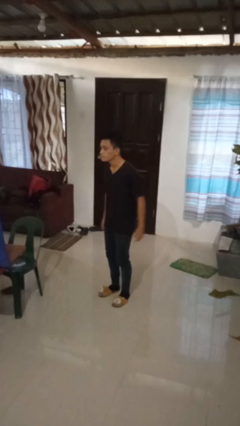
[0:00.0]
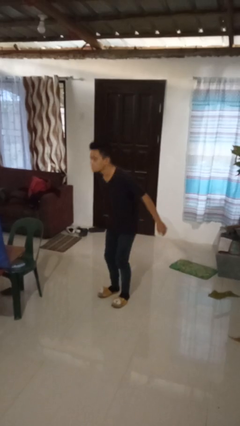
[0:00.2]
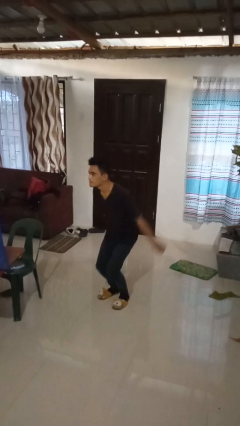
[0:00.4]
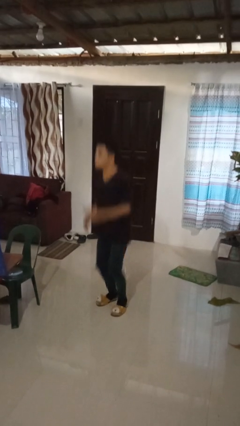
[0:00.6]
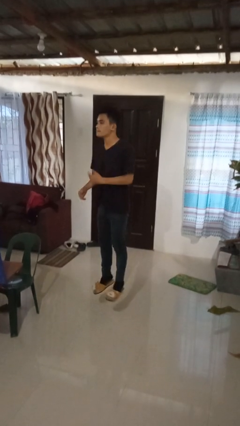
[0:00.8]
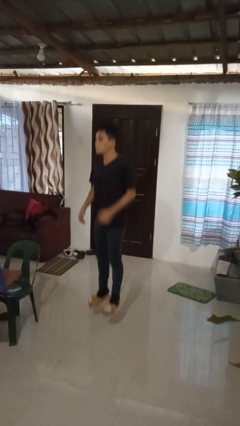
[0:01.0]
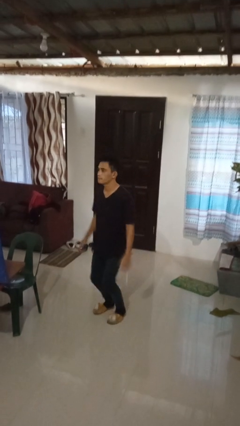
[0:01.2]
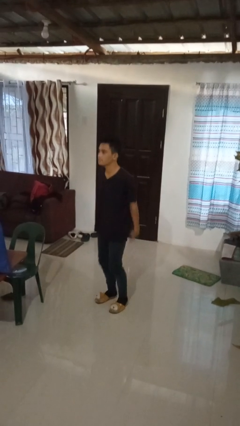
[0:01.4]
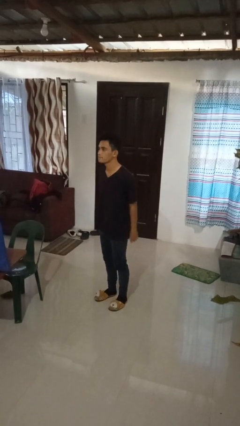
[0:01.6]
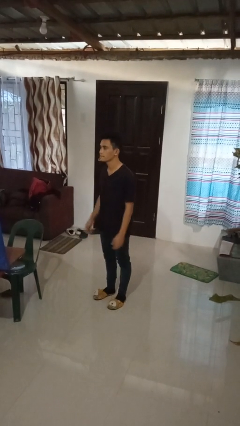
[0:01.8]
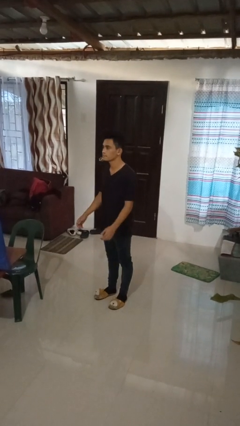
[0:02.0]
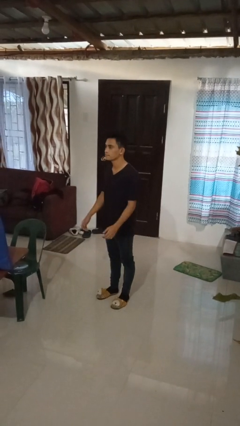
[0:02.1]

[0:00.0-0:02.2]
person jumps

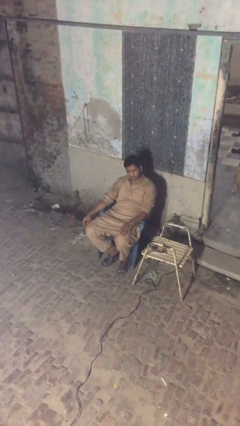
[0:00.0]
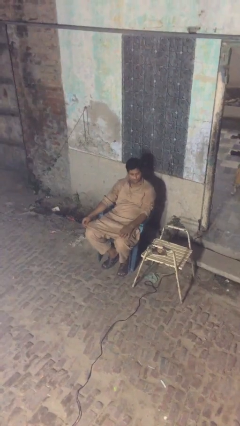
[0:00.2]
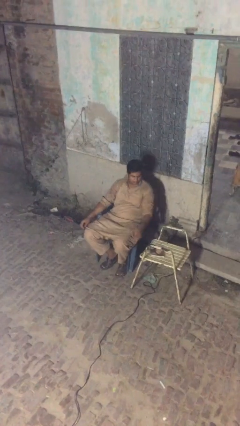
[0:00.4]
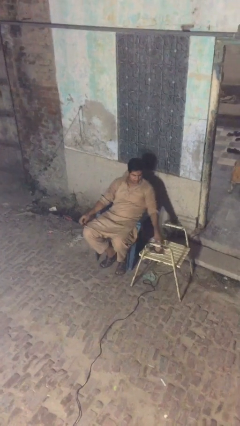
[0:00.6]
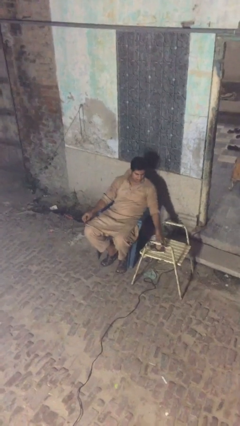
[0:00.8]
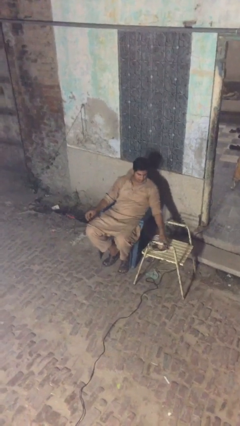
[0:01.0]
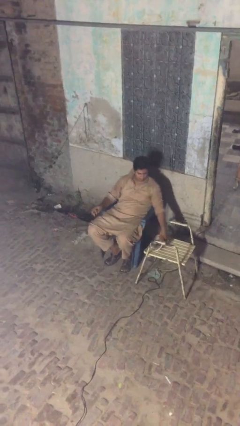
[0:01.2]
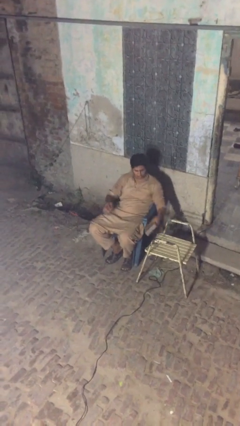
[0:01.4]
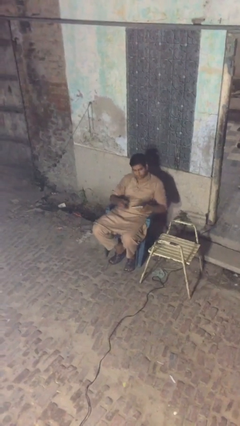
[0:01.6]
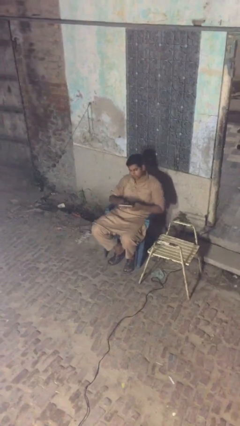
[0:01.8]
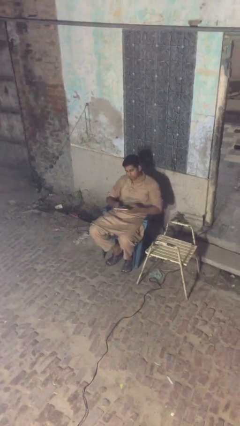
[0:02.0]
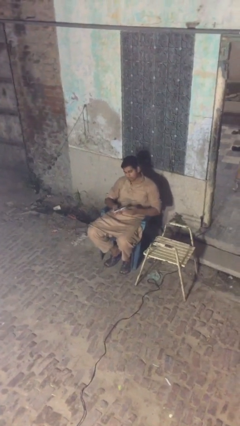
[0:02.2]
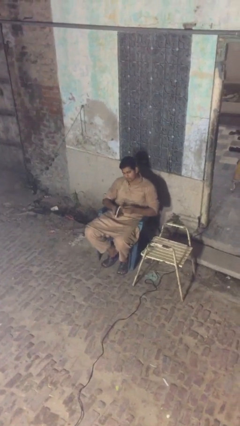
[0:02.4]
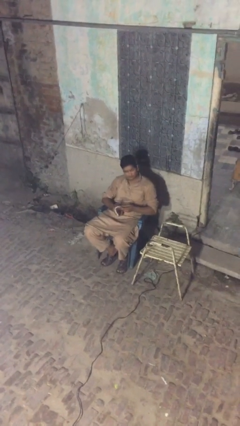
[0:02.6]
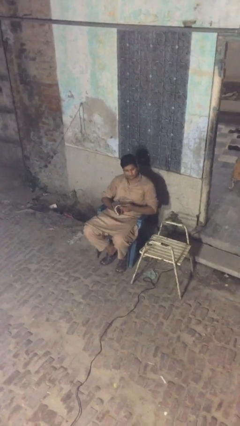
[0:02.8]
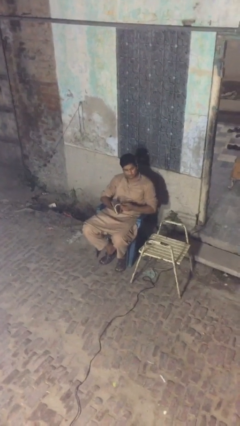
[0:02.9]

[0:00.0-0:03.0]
person picks up object from table

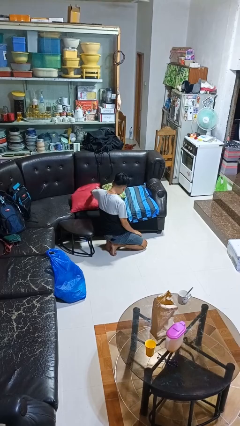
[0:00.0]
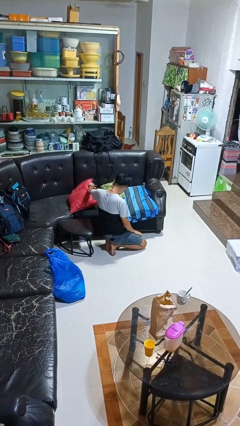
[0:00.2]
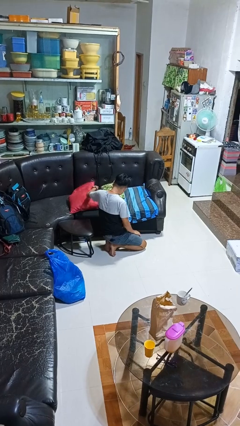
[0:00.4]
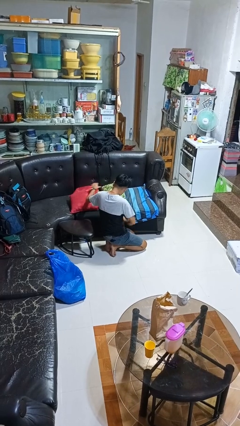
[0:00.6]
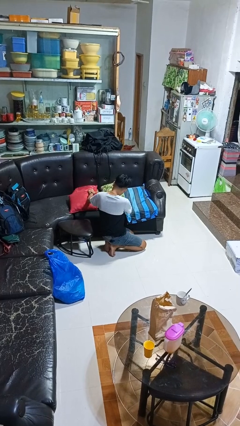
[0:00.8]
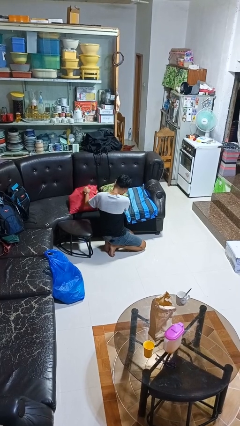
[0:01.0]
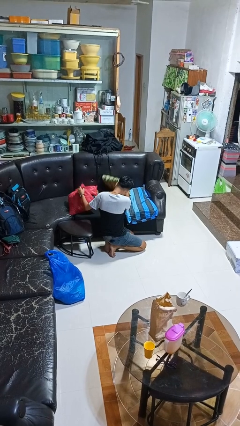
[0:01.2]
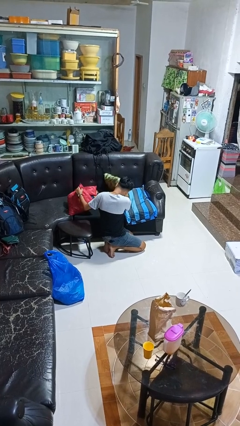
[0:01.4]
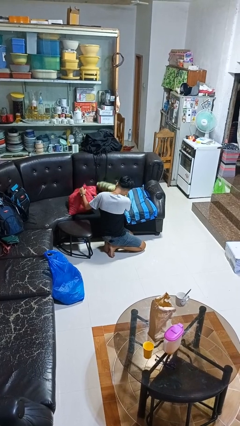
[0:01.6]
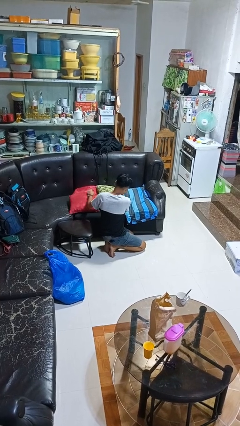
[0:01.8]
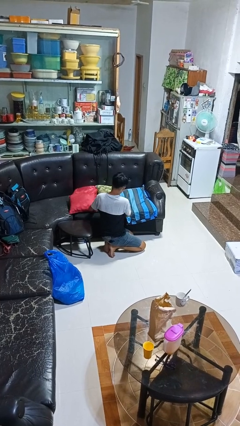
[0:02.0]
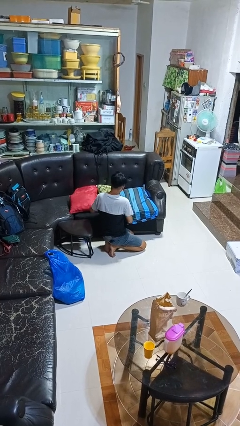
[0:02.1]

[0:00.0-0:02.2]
person searches in couch

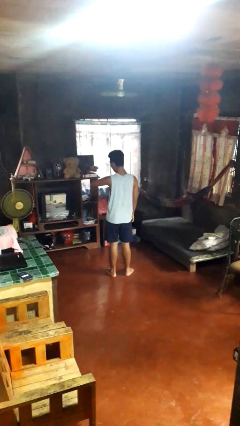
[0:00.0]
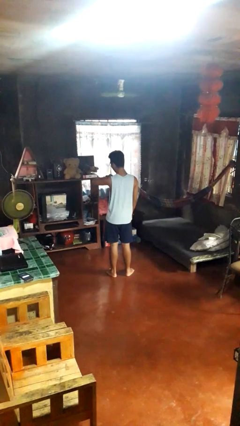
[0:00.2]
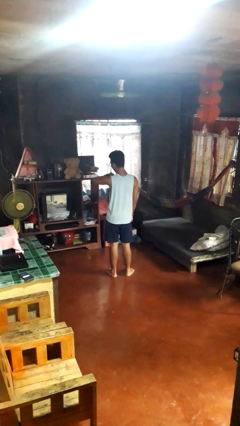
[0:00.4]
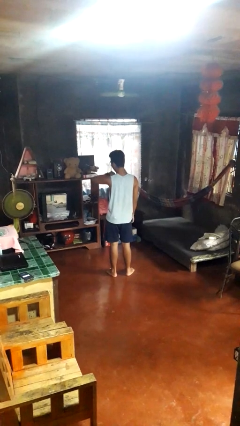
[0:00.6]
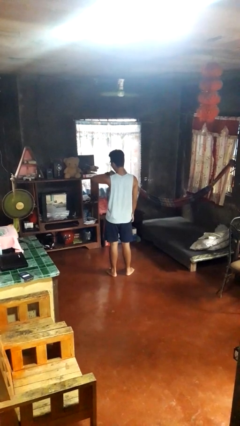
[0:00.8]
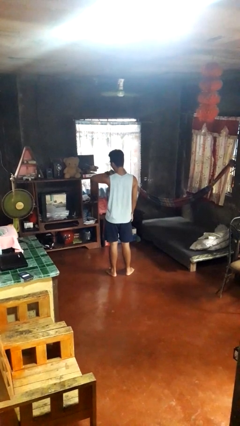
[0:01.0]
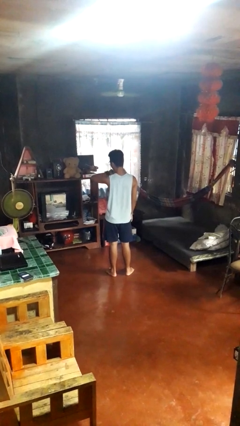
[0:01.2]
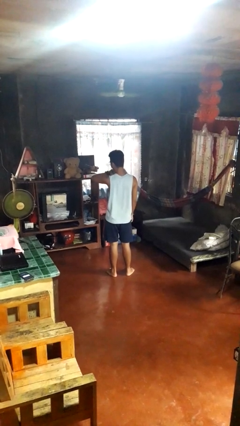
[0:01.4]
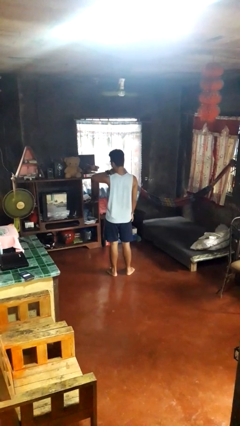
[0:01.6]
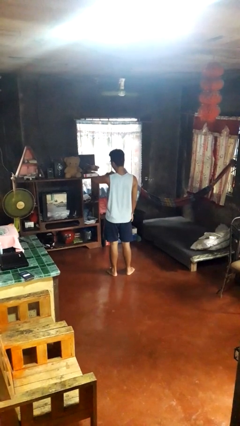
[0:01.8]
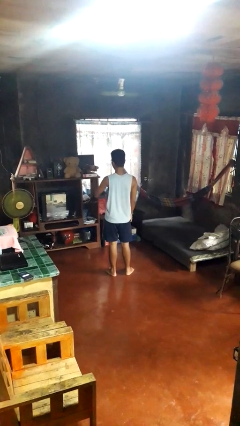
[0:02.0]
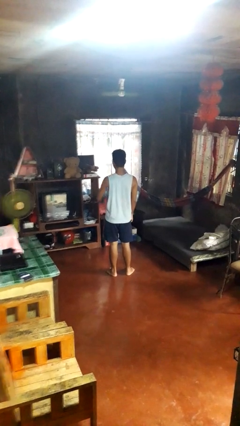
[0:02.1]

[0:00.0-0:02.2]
person looks at wristwatch

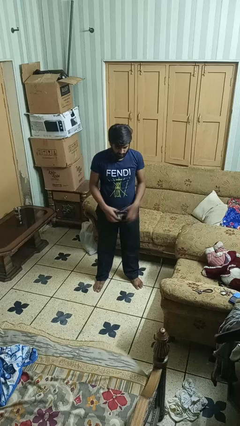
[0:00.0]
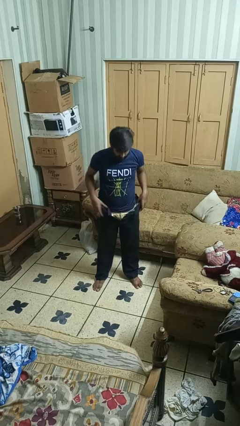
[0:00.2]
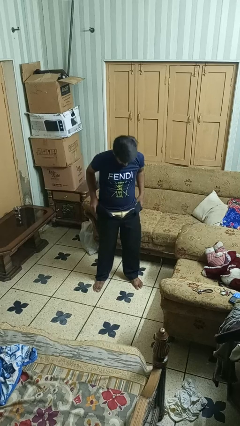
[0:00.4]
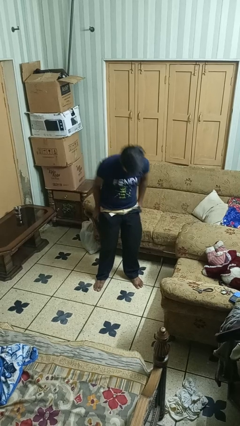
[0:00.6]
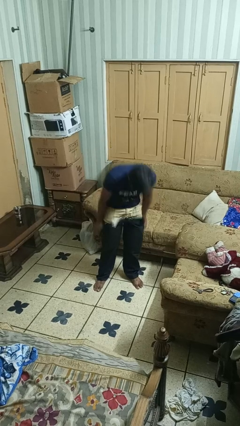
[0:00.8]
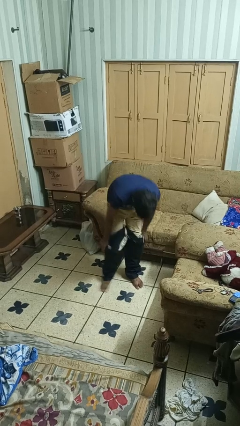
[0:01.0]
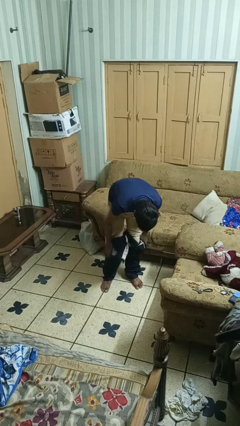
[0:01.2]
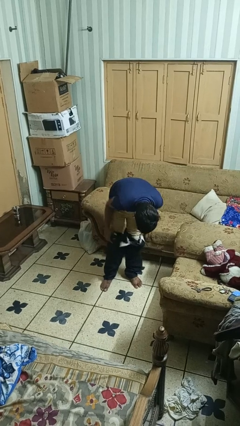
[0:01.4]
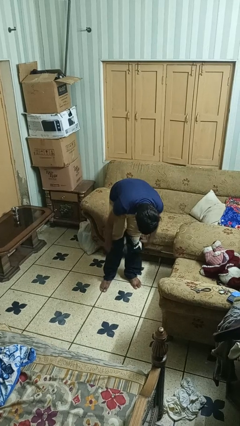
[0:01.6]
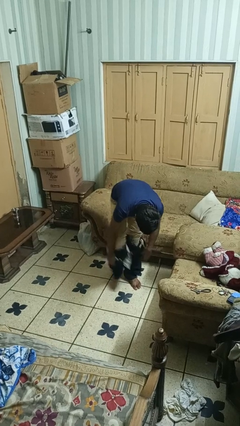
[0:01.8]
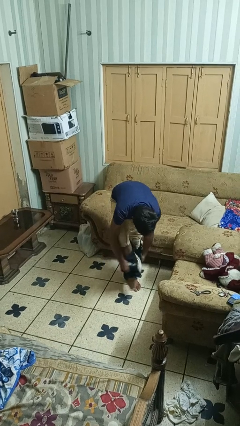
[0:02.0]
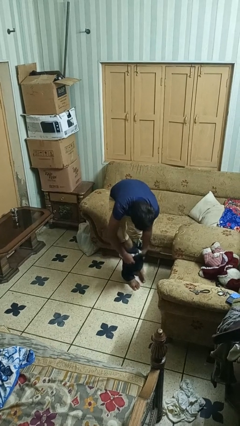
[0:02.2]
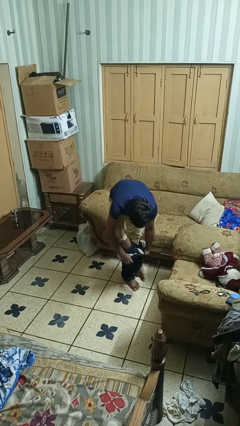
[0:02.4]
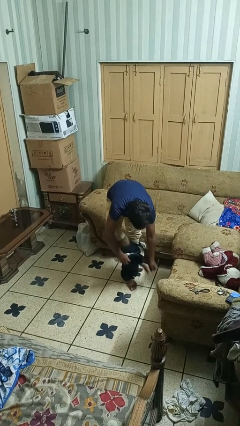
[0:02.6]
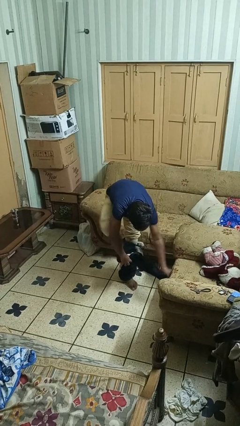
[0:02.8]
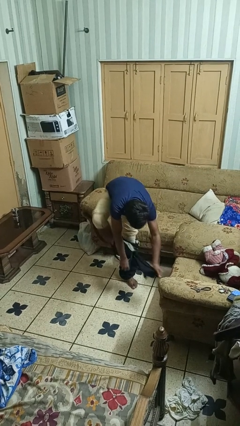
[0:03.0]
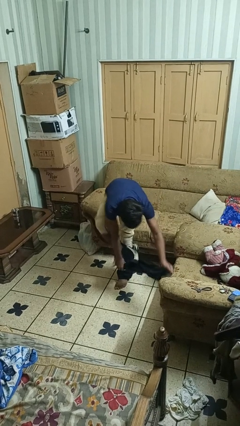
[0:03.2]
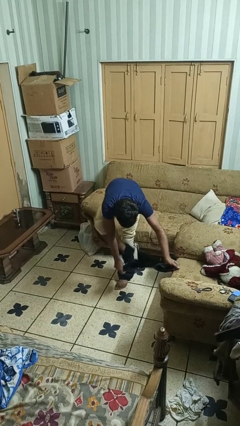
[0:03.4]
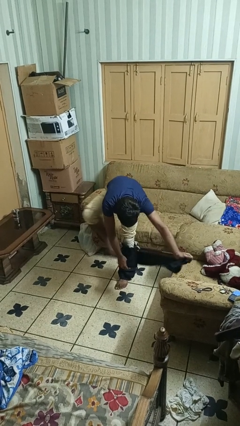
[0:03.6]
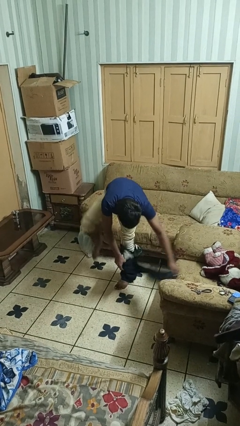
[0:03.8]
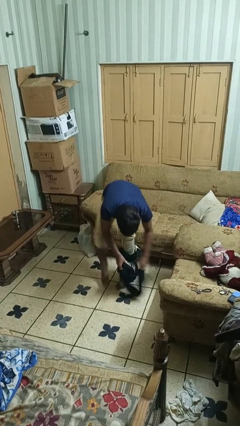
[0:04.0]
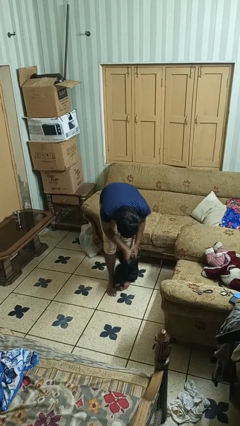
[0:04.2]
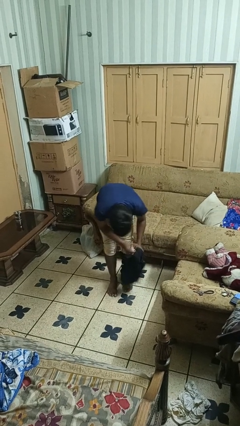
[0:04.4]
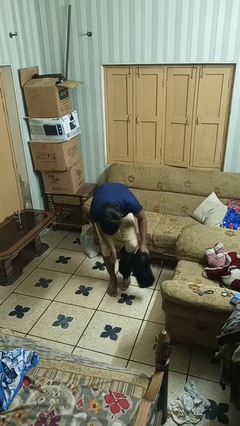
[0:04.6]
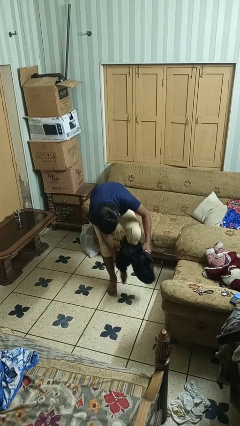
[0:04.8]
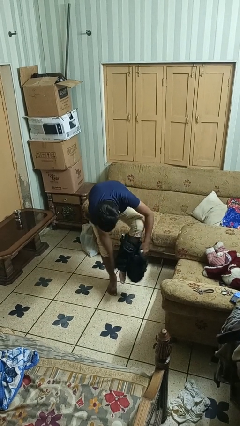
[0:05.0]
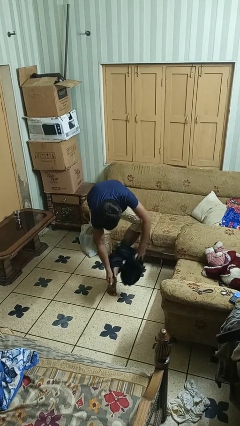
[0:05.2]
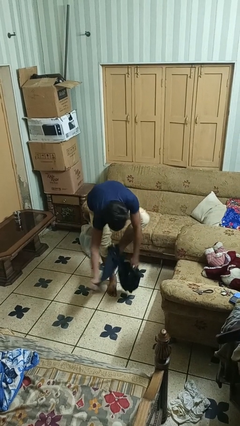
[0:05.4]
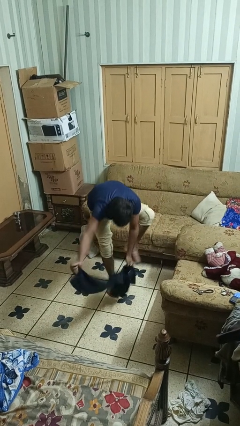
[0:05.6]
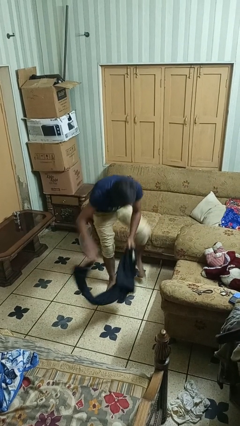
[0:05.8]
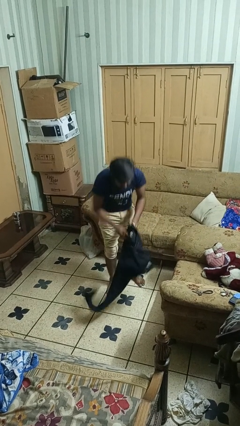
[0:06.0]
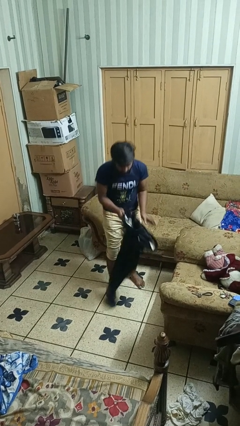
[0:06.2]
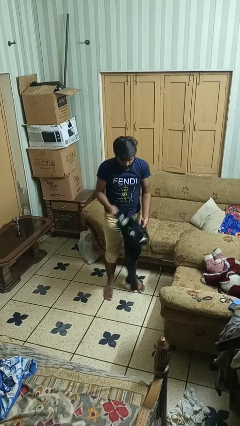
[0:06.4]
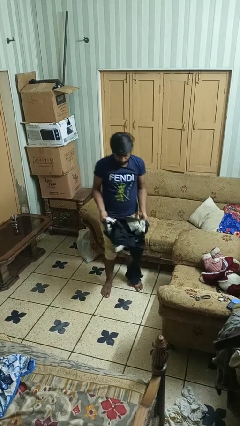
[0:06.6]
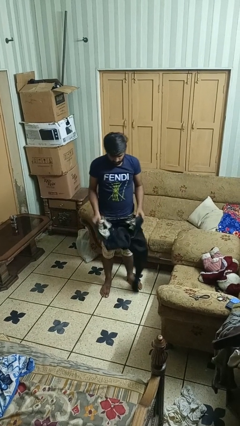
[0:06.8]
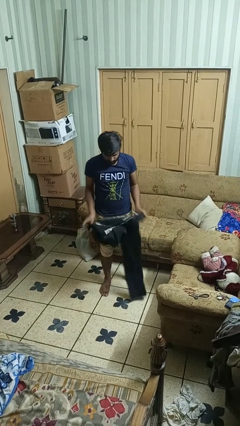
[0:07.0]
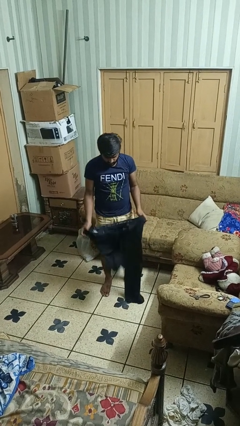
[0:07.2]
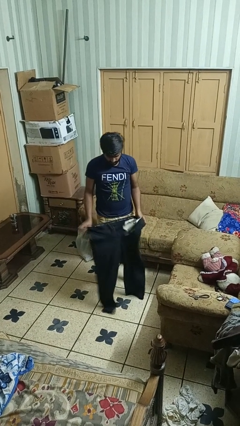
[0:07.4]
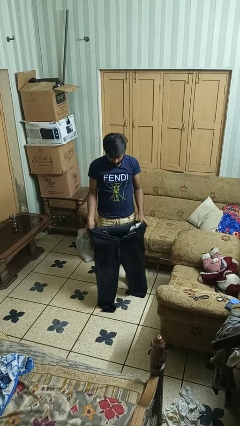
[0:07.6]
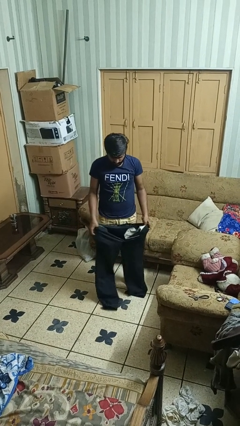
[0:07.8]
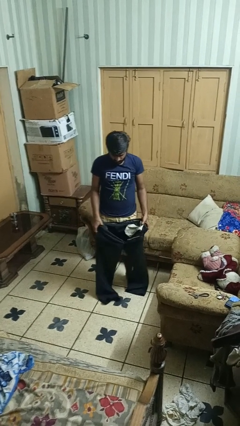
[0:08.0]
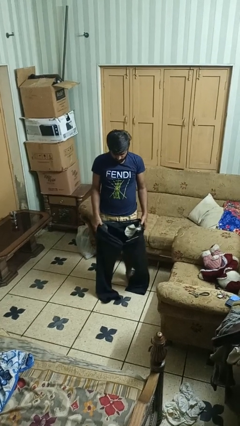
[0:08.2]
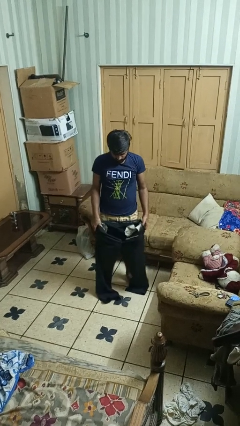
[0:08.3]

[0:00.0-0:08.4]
person takes off pants
